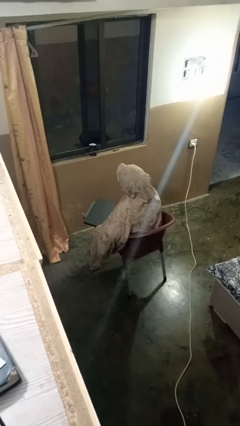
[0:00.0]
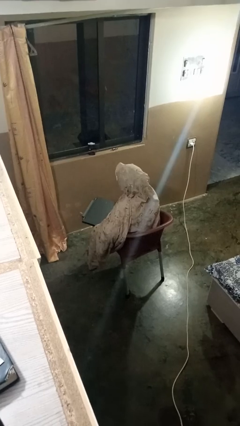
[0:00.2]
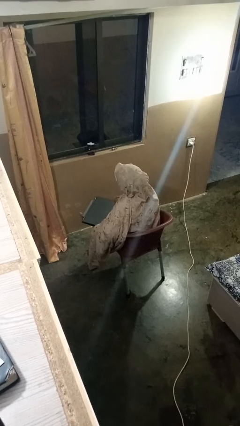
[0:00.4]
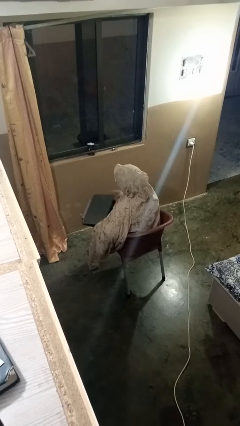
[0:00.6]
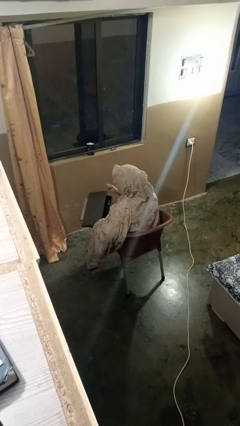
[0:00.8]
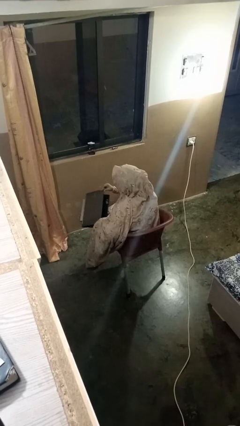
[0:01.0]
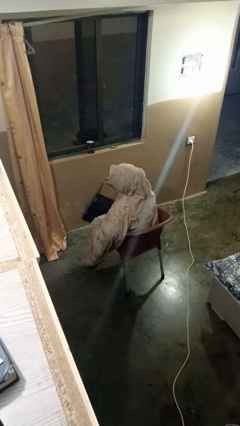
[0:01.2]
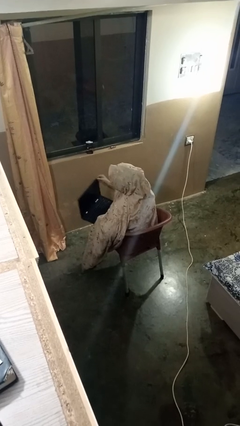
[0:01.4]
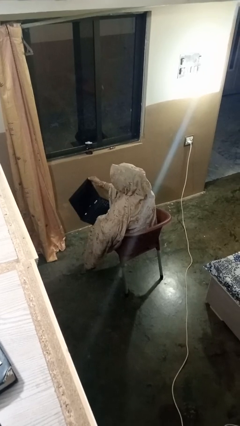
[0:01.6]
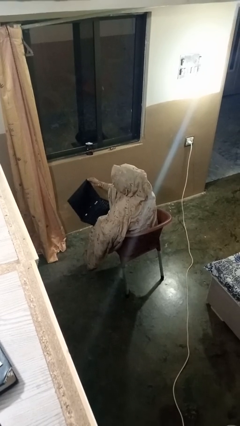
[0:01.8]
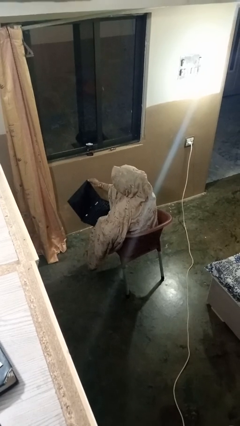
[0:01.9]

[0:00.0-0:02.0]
person opens laptop

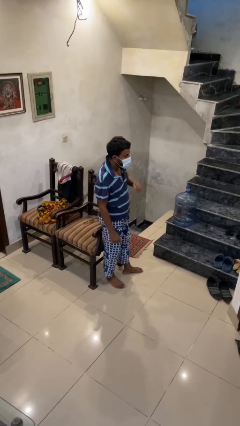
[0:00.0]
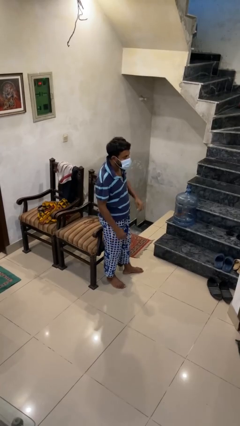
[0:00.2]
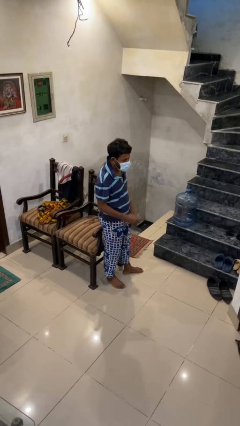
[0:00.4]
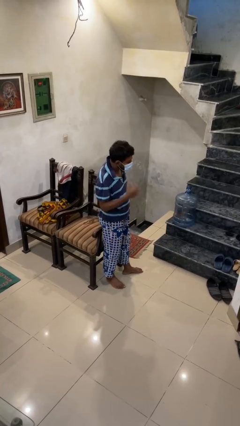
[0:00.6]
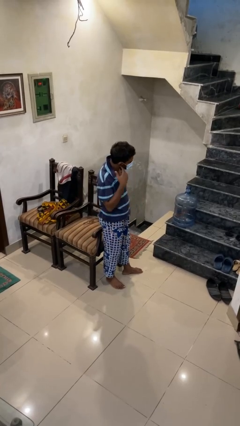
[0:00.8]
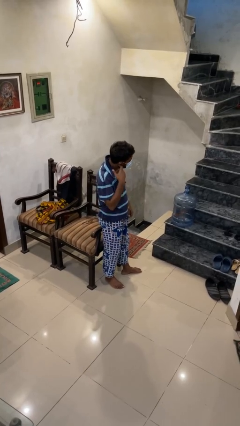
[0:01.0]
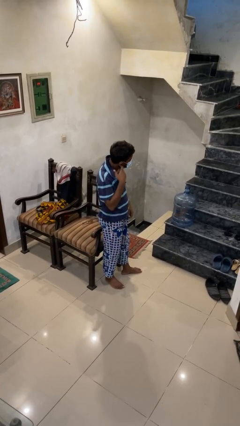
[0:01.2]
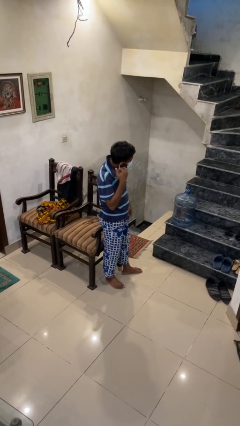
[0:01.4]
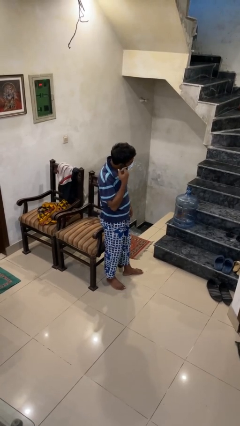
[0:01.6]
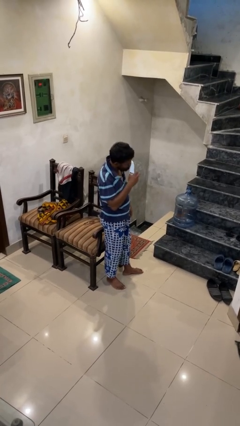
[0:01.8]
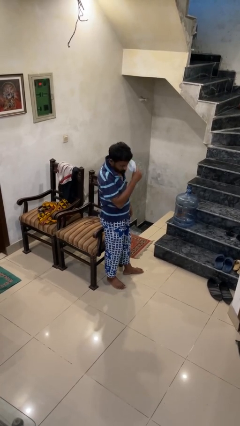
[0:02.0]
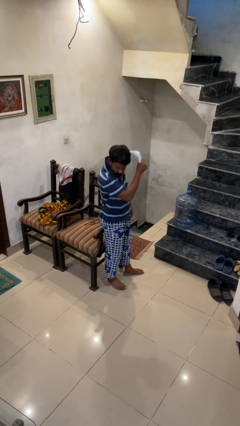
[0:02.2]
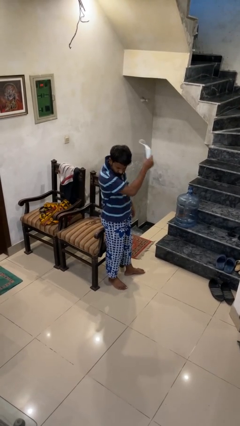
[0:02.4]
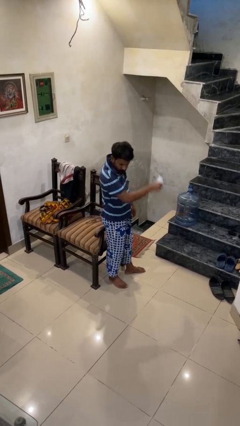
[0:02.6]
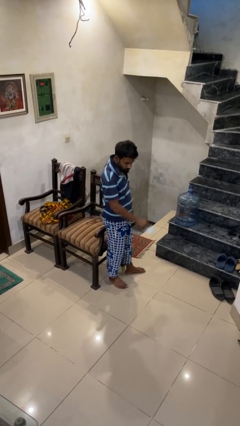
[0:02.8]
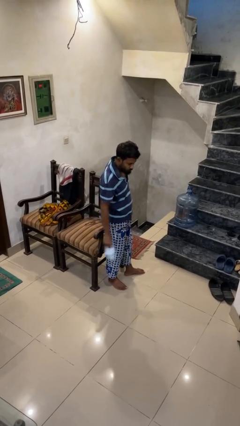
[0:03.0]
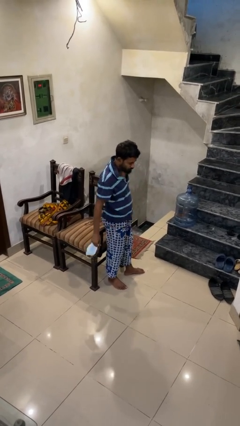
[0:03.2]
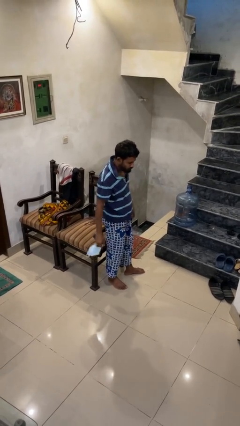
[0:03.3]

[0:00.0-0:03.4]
person takes off facemask

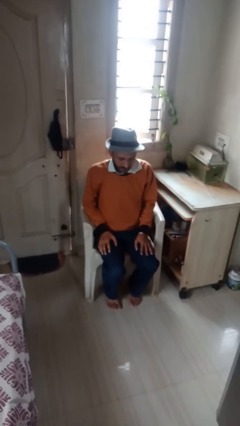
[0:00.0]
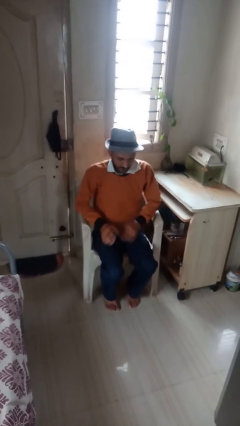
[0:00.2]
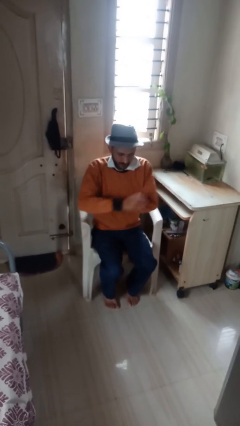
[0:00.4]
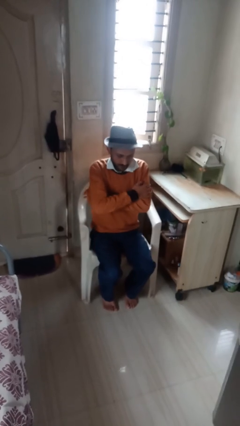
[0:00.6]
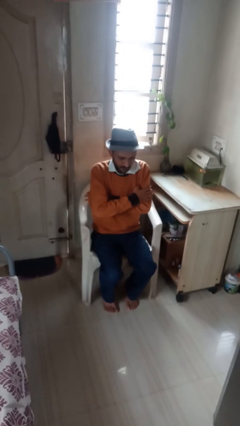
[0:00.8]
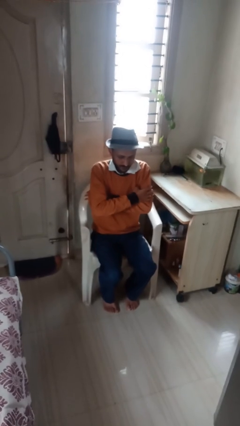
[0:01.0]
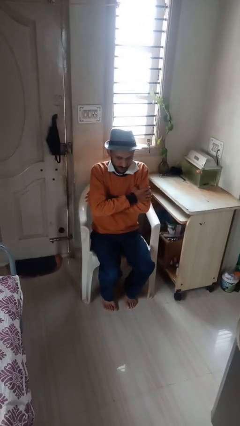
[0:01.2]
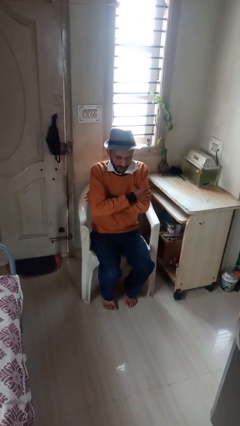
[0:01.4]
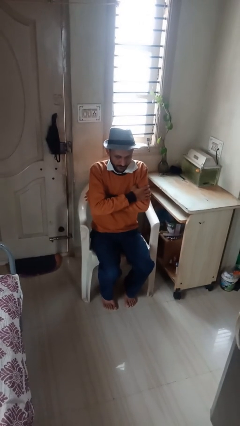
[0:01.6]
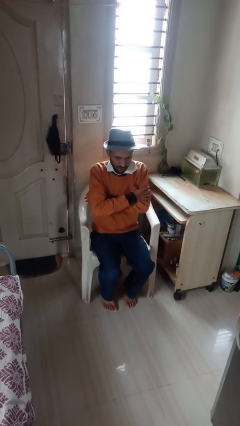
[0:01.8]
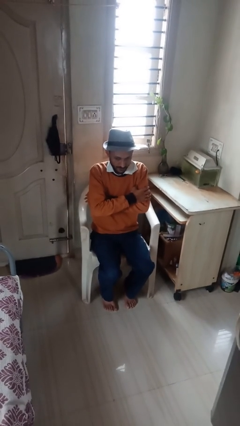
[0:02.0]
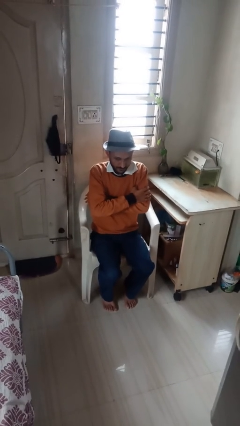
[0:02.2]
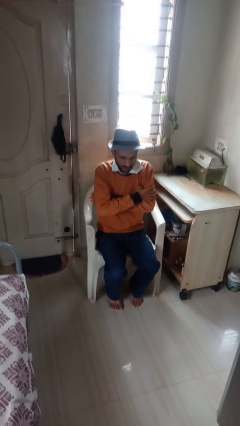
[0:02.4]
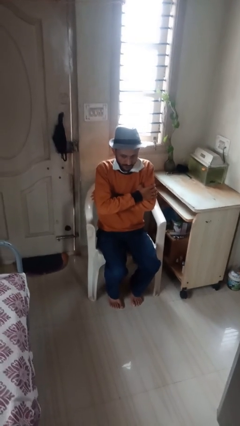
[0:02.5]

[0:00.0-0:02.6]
person crosses arms

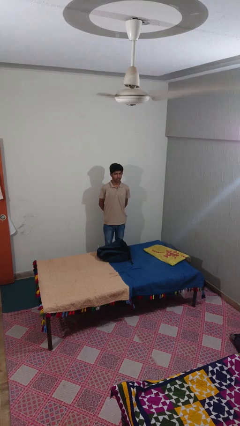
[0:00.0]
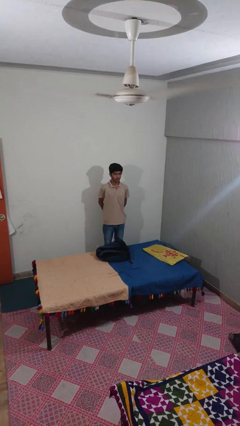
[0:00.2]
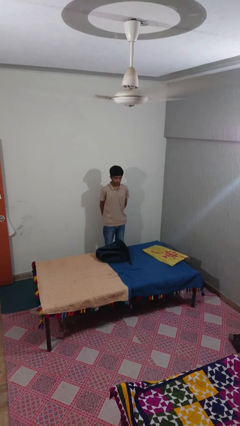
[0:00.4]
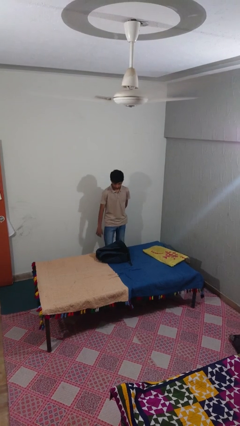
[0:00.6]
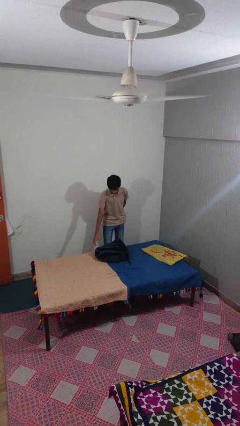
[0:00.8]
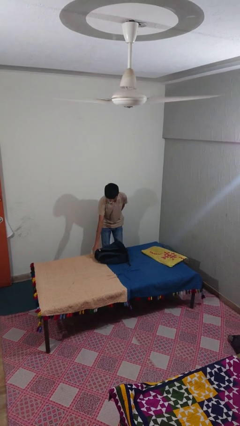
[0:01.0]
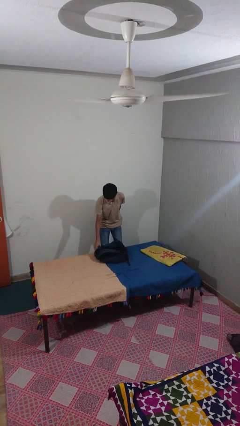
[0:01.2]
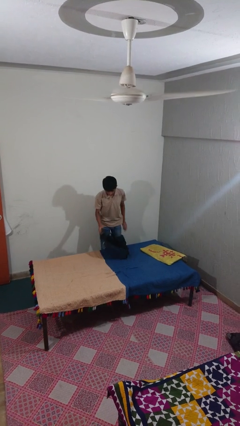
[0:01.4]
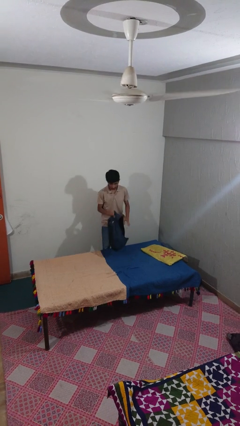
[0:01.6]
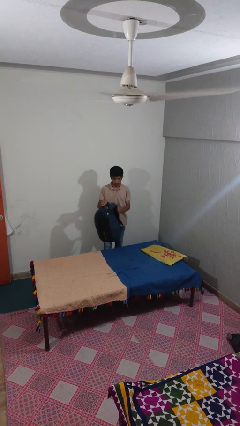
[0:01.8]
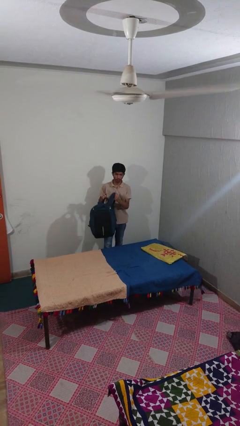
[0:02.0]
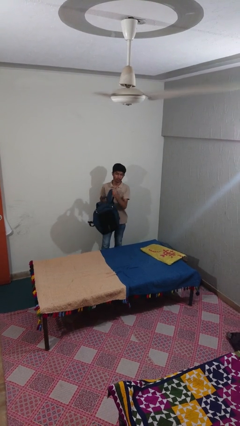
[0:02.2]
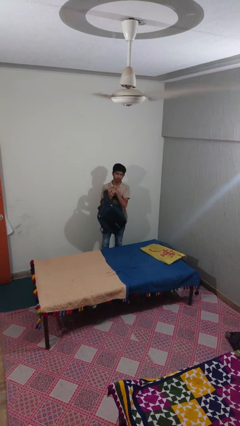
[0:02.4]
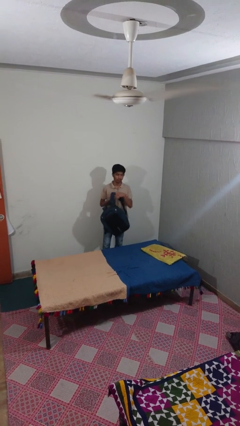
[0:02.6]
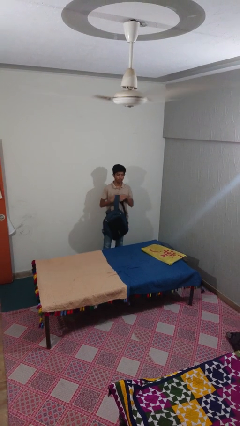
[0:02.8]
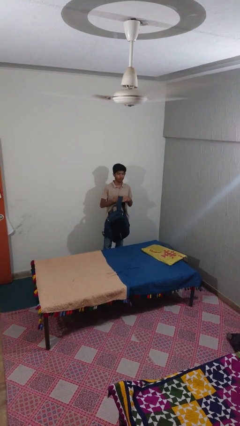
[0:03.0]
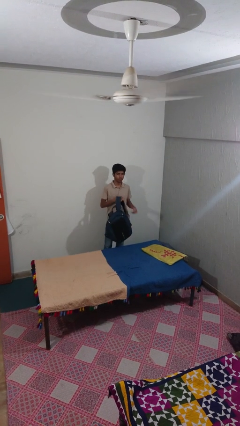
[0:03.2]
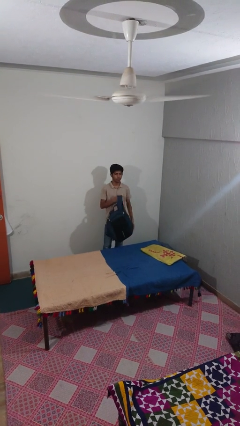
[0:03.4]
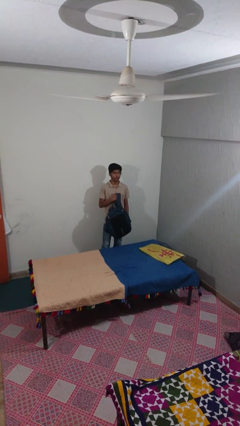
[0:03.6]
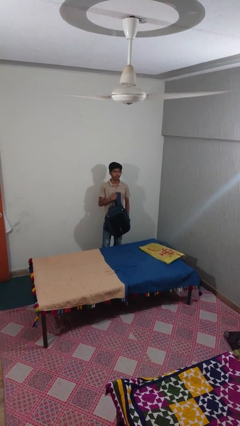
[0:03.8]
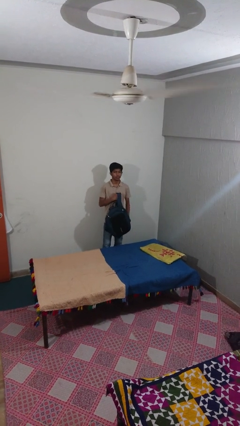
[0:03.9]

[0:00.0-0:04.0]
person picks up object from bed

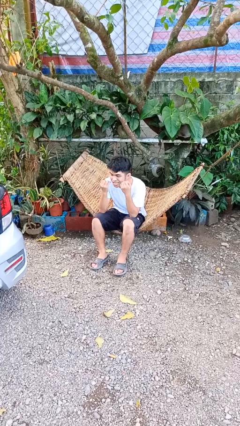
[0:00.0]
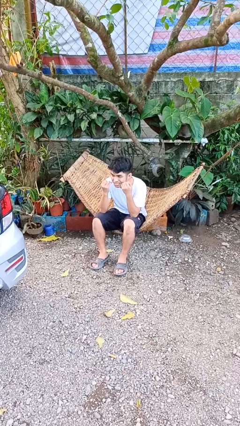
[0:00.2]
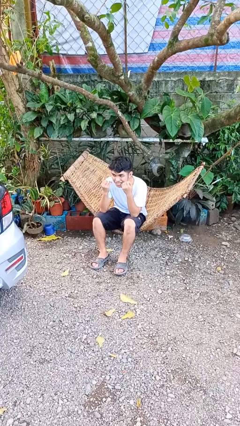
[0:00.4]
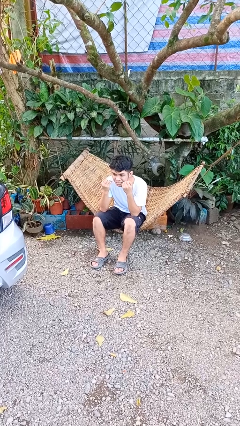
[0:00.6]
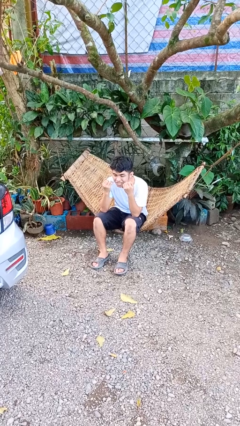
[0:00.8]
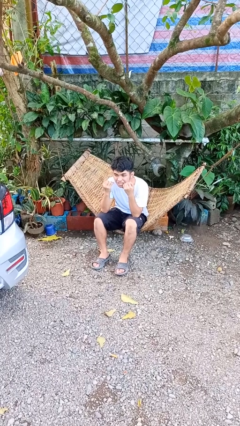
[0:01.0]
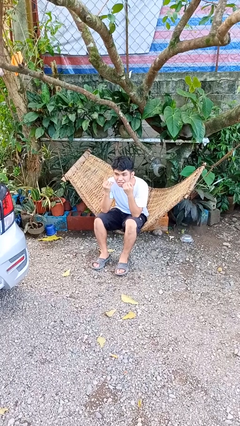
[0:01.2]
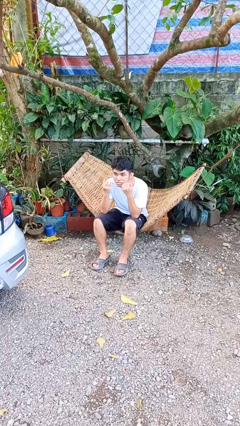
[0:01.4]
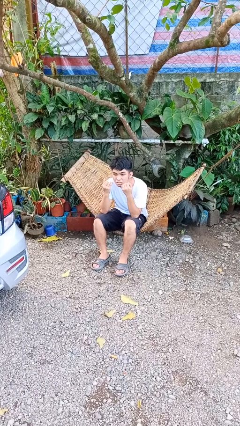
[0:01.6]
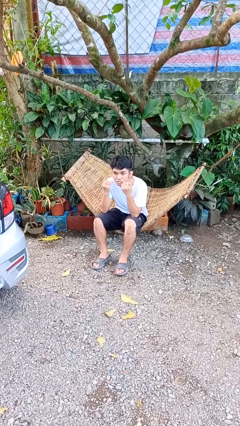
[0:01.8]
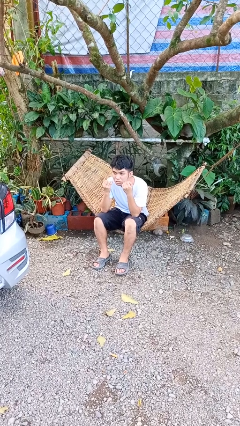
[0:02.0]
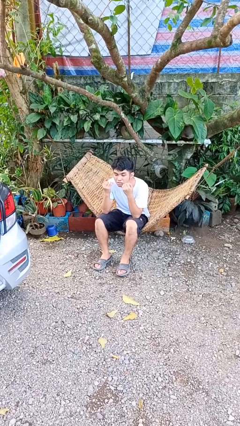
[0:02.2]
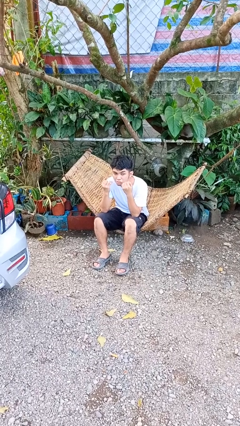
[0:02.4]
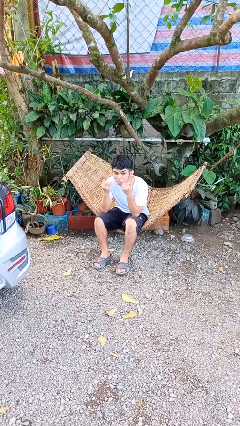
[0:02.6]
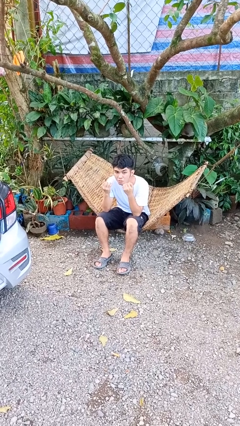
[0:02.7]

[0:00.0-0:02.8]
person flosses

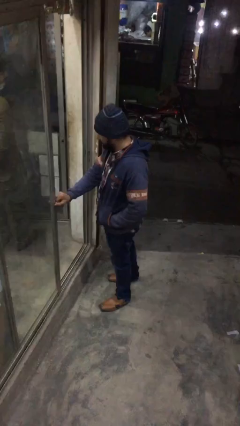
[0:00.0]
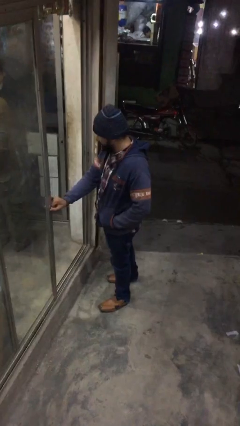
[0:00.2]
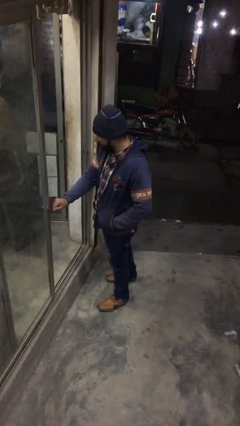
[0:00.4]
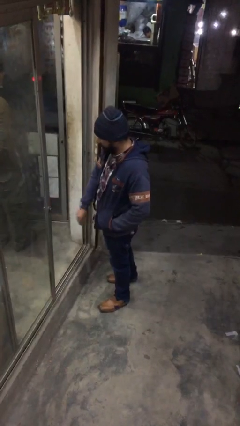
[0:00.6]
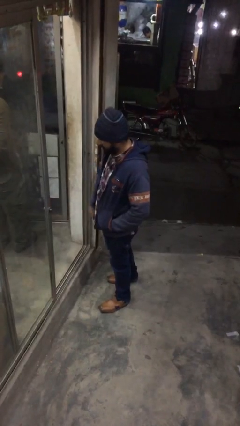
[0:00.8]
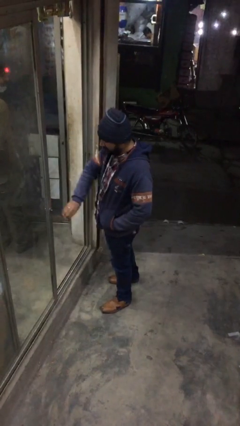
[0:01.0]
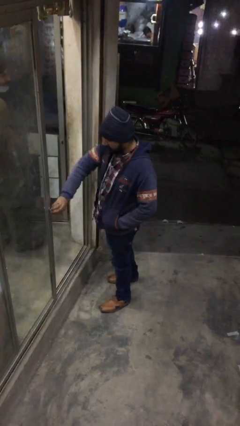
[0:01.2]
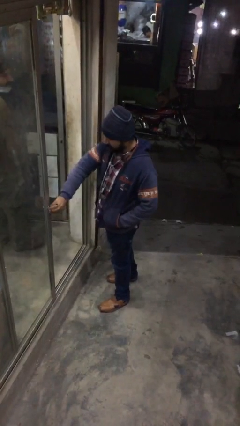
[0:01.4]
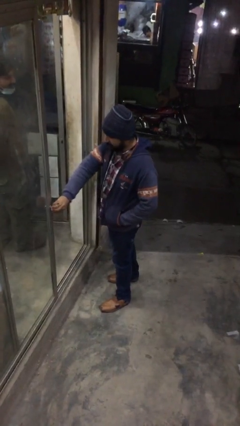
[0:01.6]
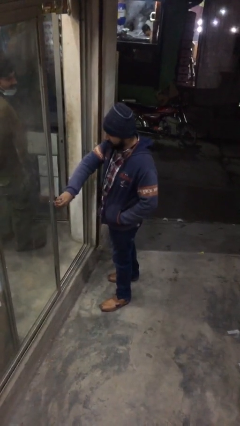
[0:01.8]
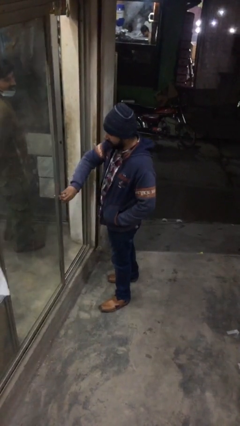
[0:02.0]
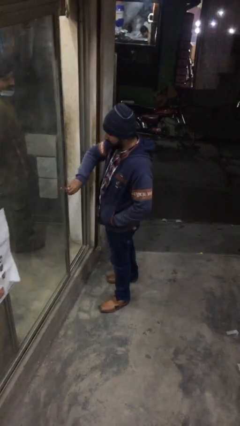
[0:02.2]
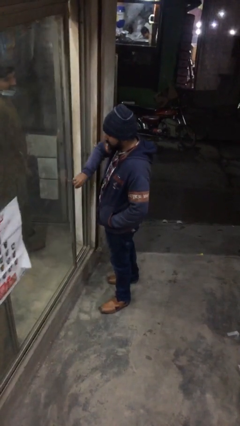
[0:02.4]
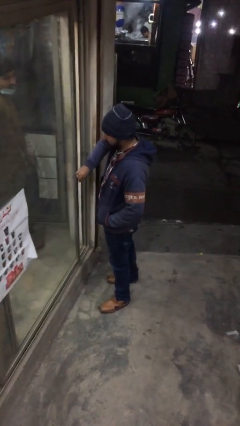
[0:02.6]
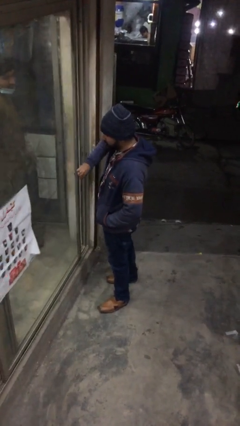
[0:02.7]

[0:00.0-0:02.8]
person closes facility door
